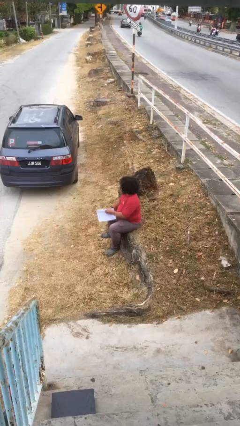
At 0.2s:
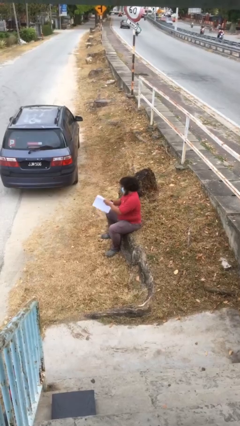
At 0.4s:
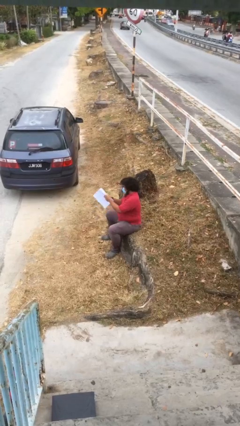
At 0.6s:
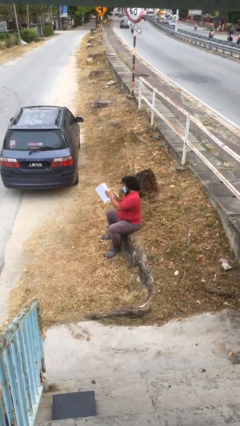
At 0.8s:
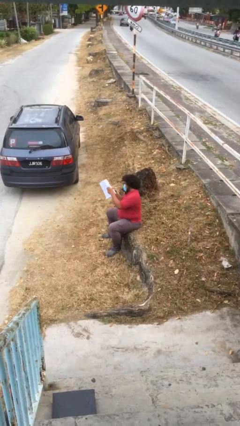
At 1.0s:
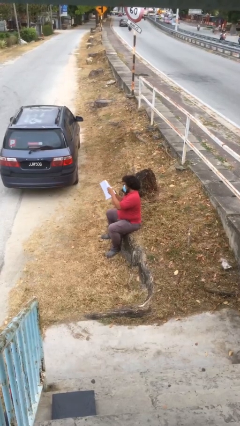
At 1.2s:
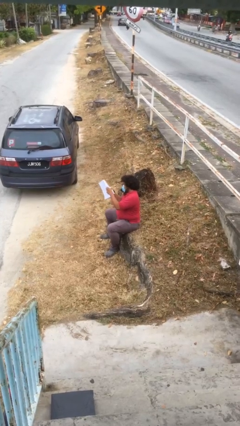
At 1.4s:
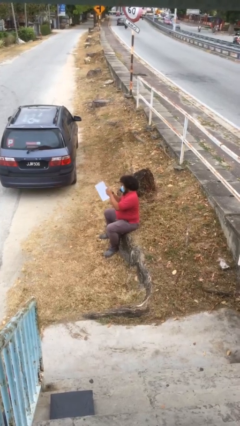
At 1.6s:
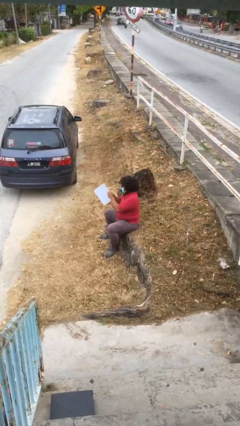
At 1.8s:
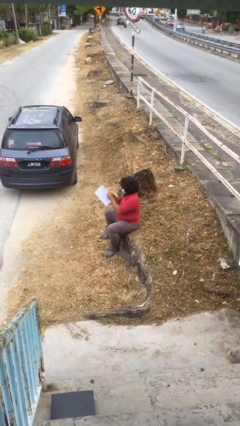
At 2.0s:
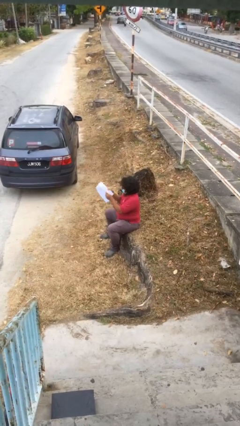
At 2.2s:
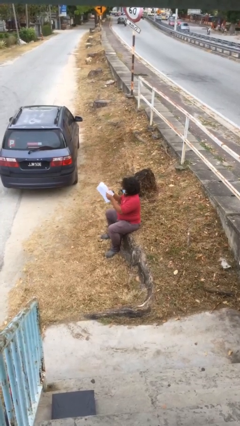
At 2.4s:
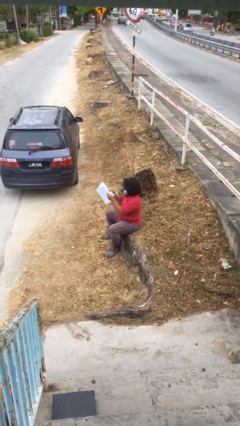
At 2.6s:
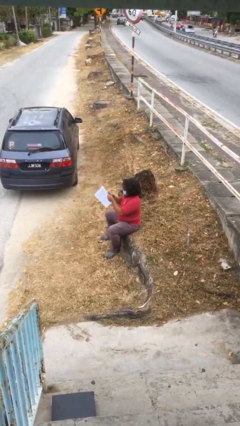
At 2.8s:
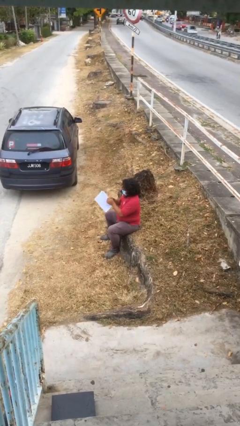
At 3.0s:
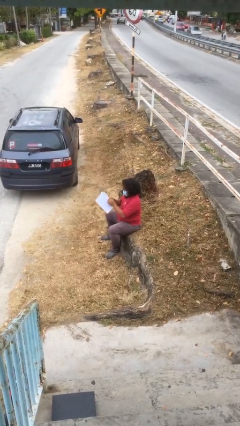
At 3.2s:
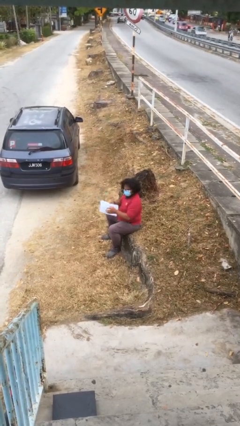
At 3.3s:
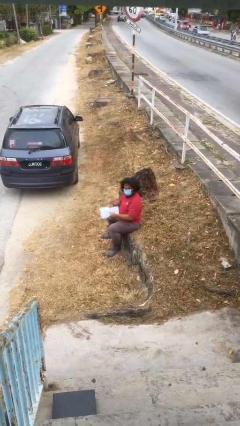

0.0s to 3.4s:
person reads document

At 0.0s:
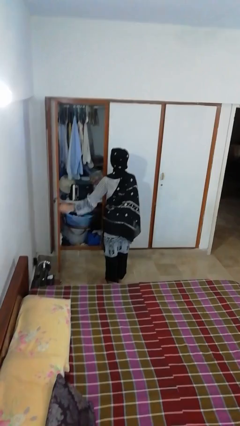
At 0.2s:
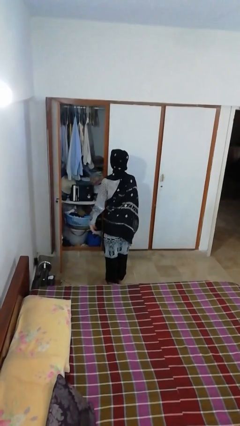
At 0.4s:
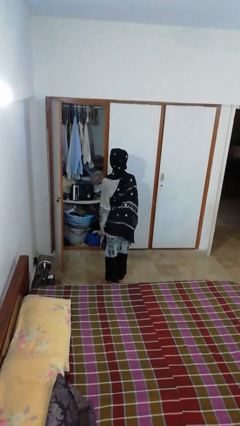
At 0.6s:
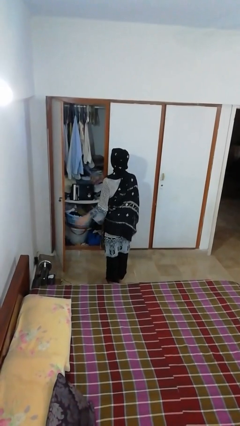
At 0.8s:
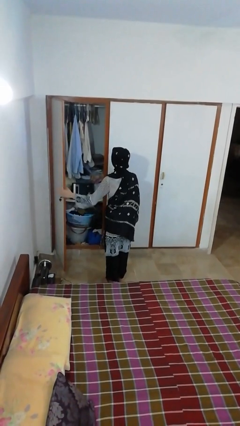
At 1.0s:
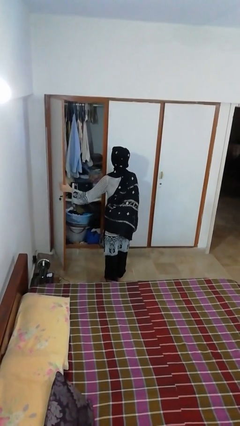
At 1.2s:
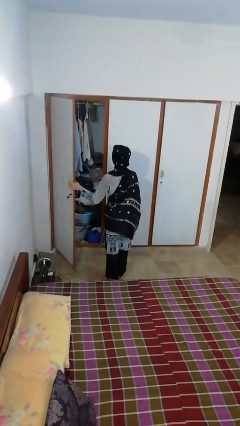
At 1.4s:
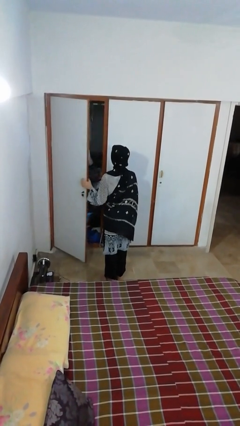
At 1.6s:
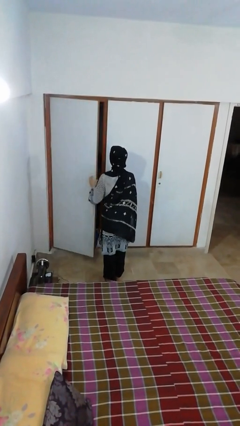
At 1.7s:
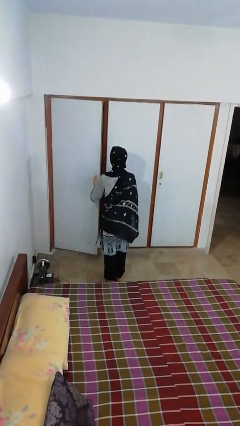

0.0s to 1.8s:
person closes closet door

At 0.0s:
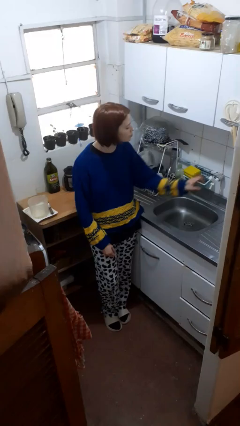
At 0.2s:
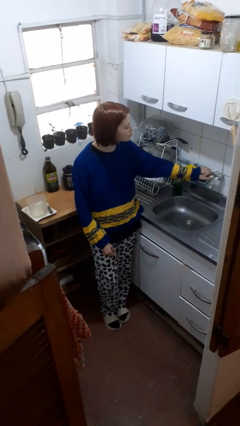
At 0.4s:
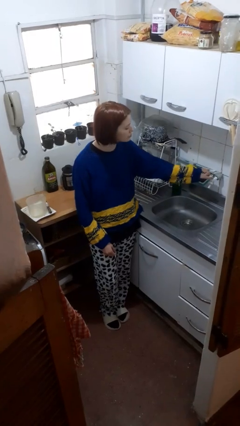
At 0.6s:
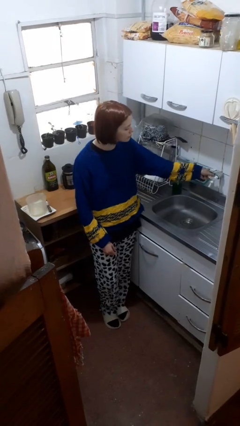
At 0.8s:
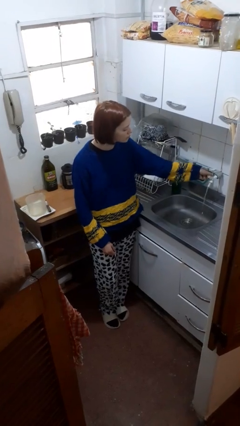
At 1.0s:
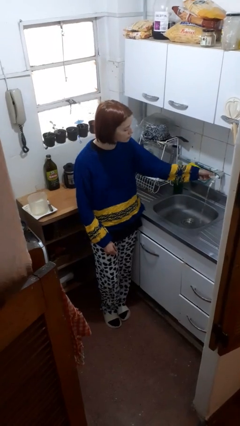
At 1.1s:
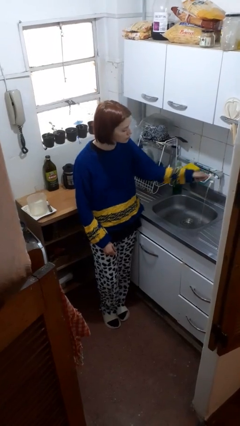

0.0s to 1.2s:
person turns on faucet

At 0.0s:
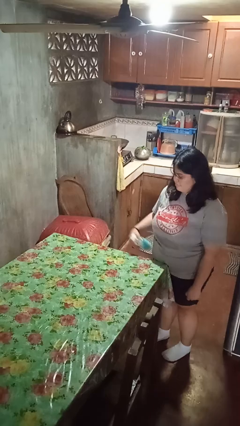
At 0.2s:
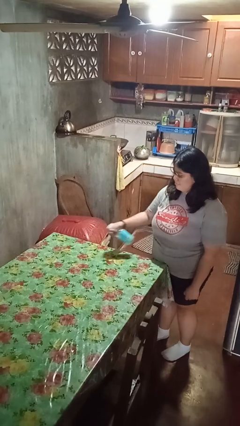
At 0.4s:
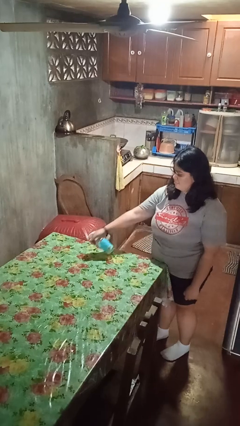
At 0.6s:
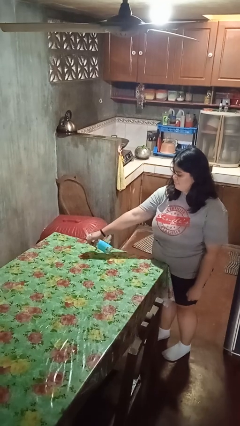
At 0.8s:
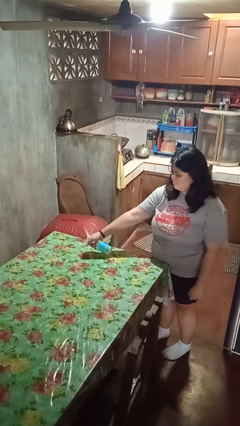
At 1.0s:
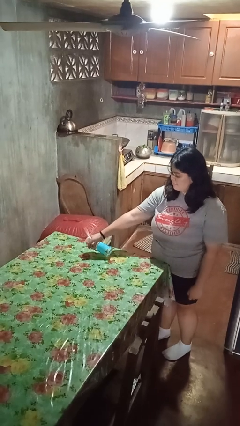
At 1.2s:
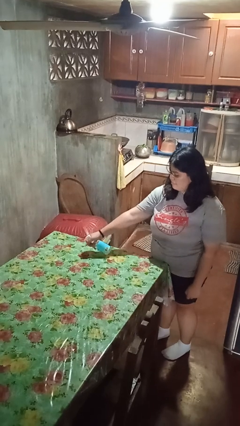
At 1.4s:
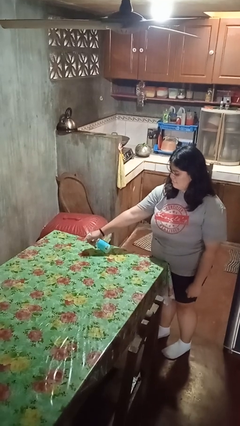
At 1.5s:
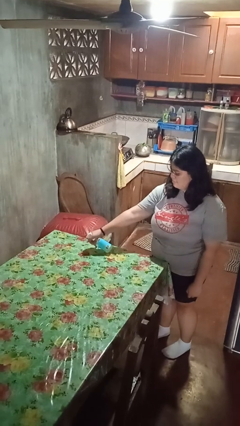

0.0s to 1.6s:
person sprays from bottle

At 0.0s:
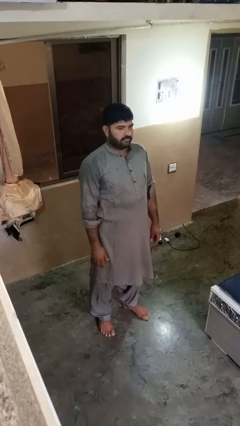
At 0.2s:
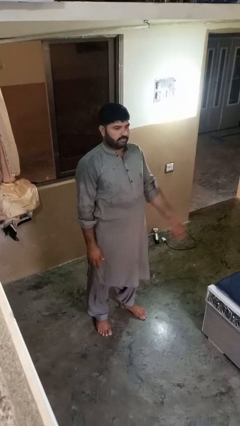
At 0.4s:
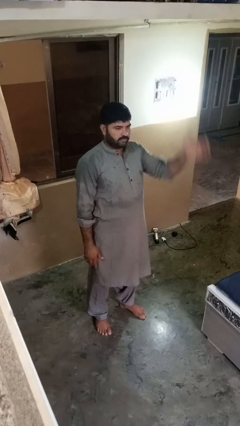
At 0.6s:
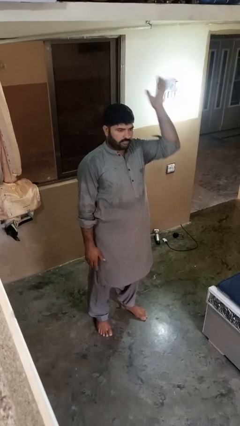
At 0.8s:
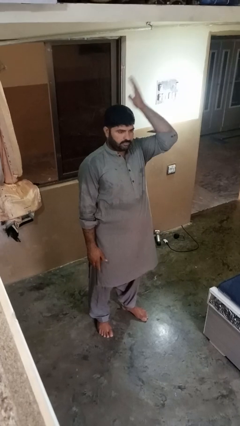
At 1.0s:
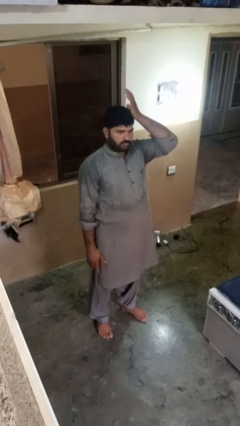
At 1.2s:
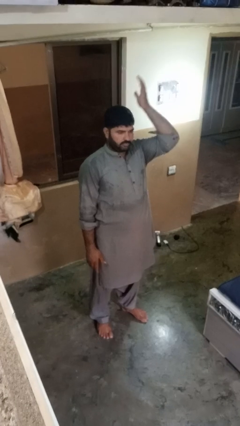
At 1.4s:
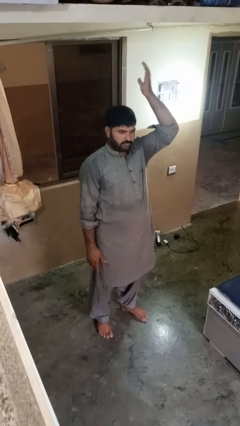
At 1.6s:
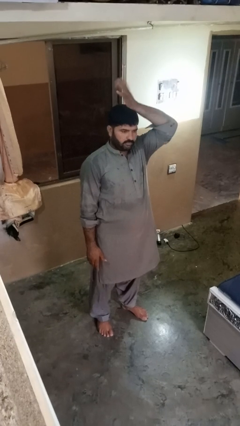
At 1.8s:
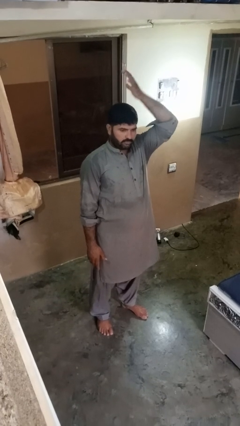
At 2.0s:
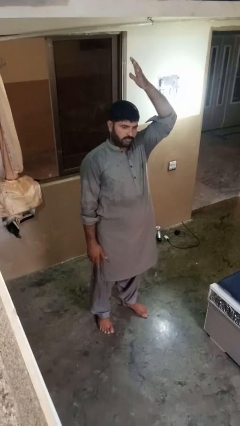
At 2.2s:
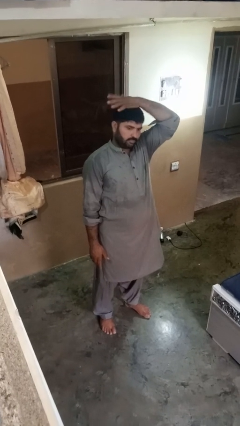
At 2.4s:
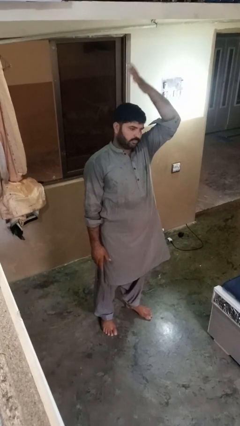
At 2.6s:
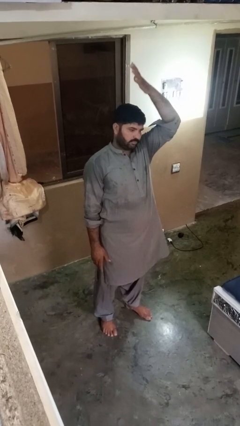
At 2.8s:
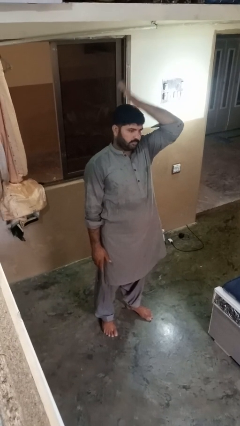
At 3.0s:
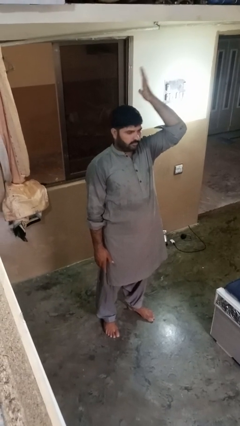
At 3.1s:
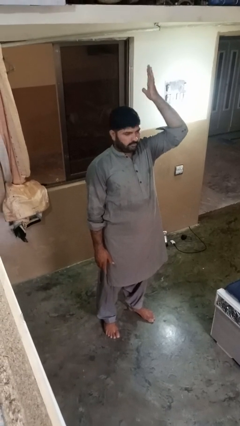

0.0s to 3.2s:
person pats head

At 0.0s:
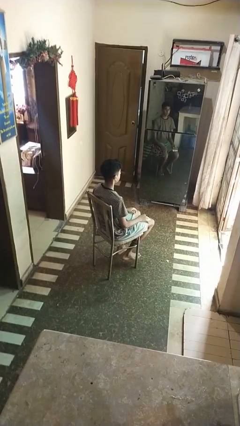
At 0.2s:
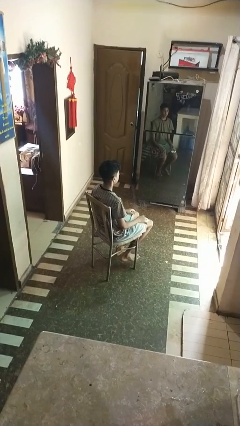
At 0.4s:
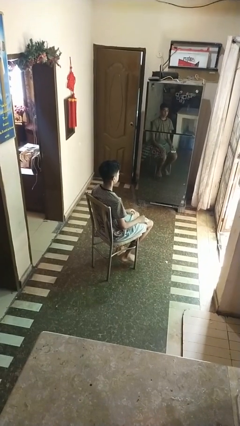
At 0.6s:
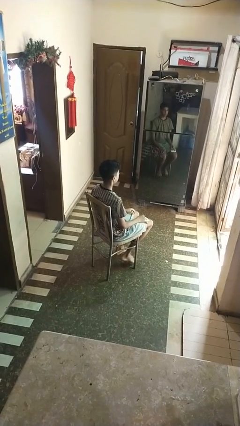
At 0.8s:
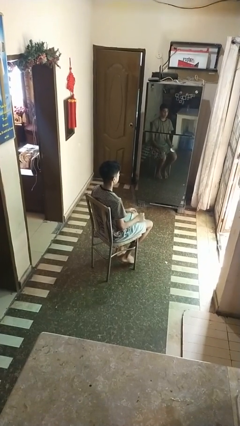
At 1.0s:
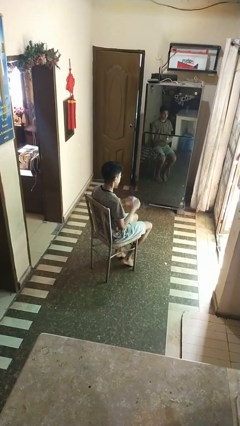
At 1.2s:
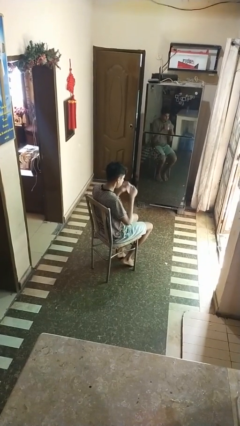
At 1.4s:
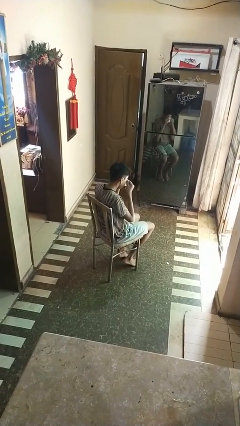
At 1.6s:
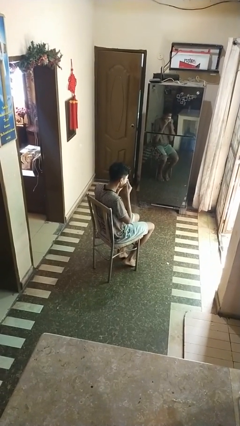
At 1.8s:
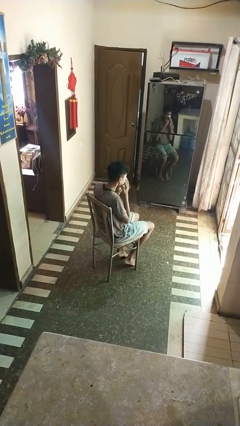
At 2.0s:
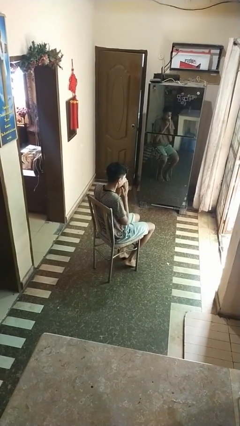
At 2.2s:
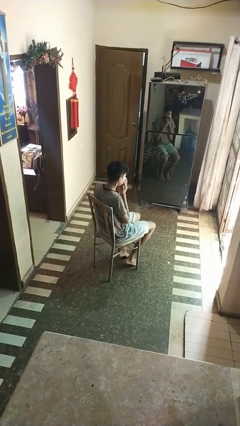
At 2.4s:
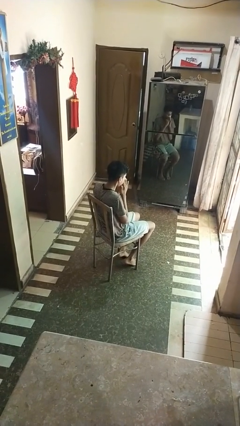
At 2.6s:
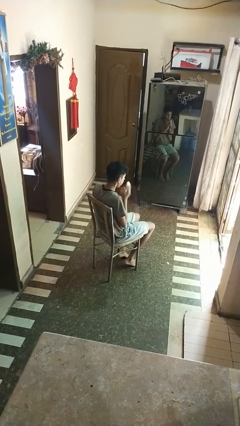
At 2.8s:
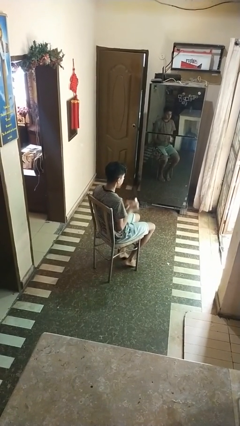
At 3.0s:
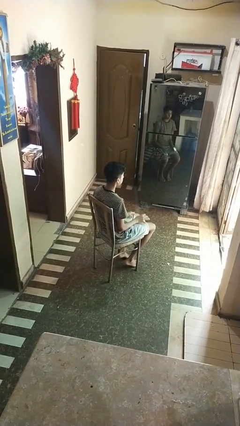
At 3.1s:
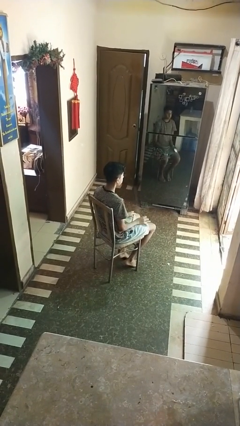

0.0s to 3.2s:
person blows nose

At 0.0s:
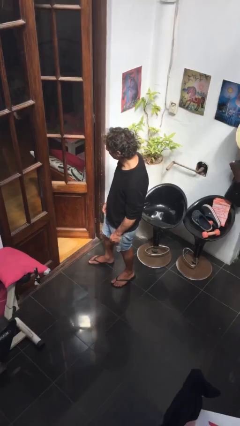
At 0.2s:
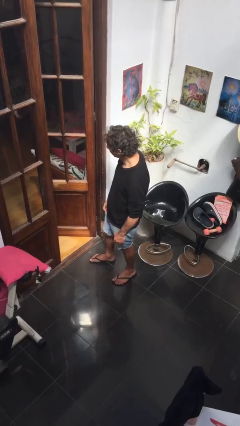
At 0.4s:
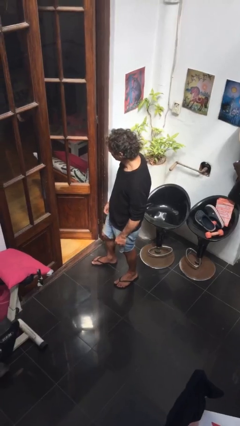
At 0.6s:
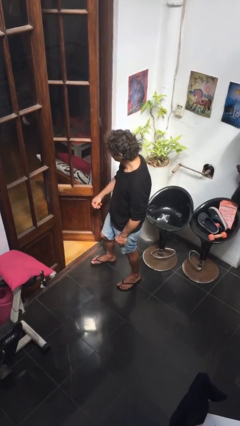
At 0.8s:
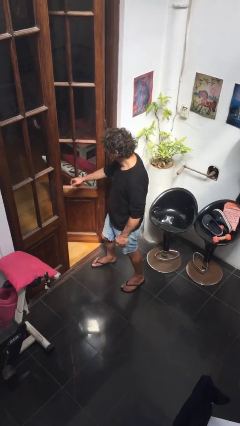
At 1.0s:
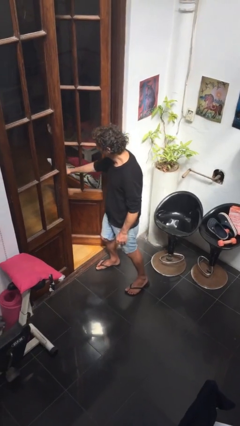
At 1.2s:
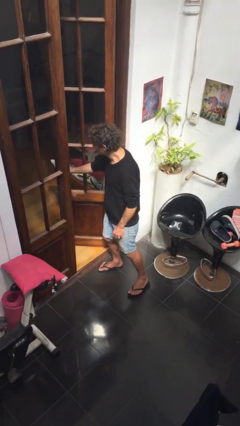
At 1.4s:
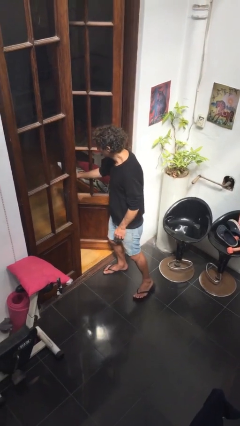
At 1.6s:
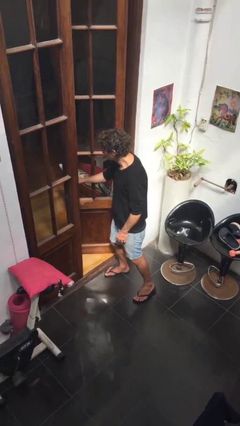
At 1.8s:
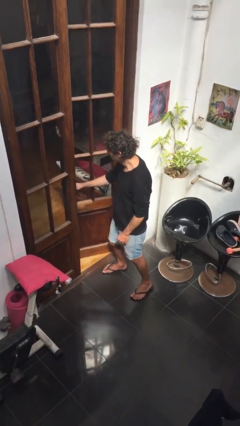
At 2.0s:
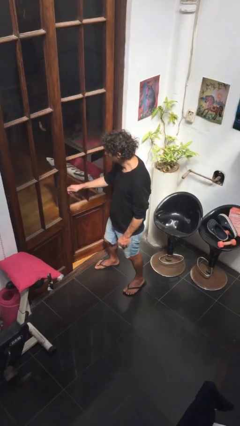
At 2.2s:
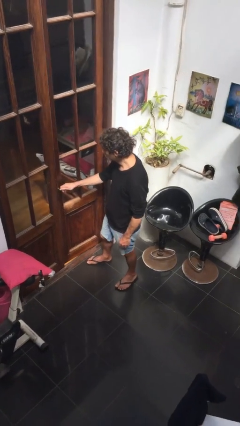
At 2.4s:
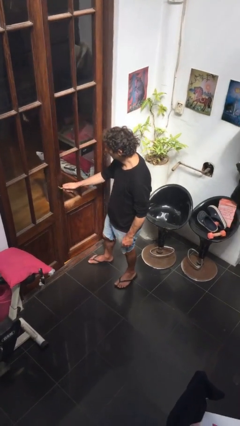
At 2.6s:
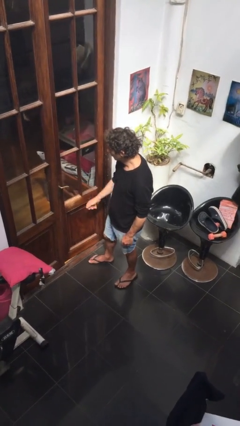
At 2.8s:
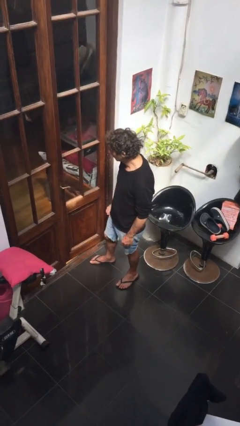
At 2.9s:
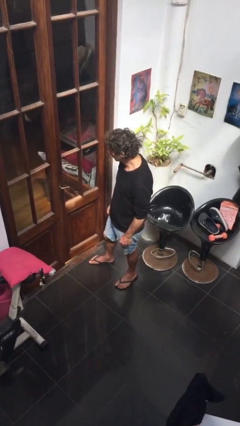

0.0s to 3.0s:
person closes facility door

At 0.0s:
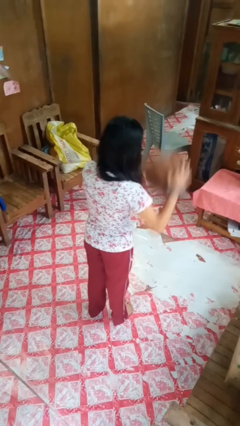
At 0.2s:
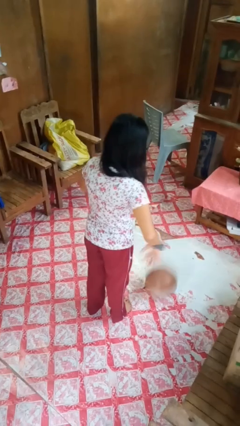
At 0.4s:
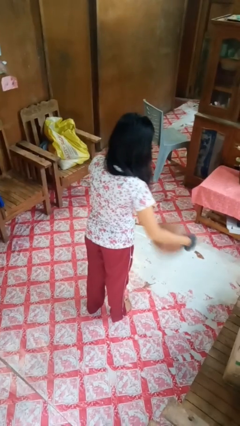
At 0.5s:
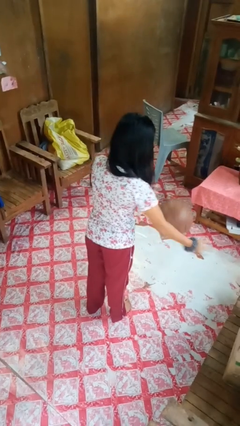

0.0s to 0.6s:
person bounces ball on floor
